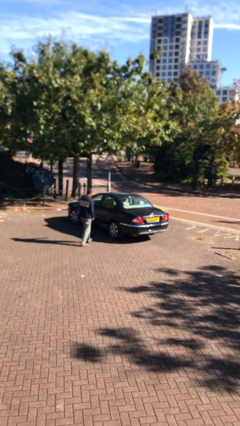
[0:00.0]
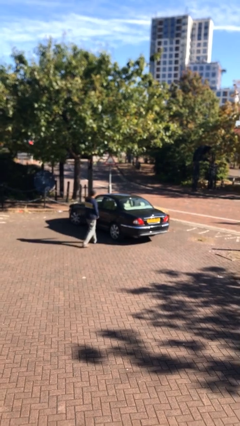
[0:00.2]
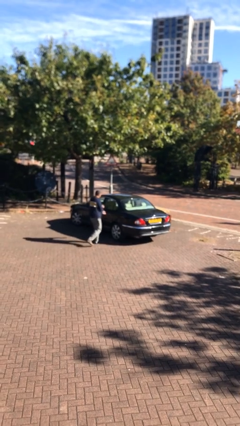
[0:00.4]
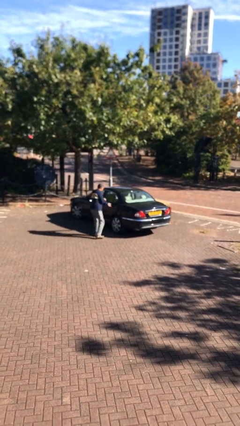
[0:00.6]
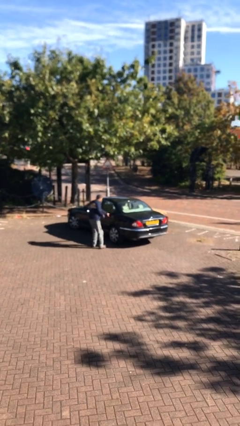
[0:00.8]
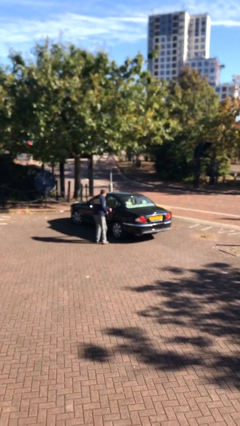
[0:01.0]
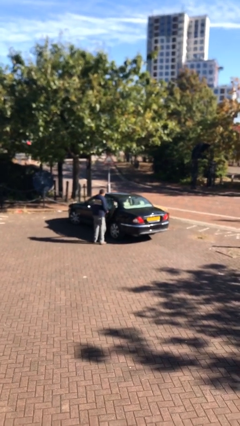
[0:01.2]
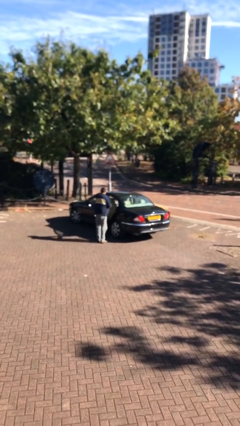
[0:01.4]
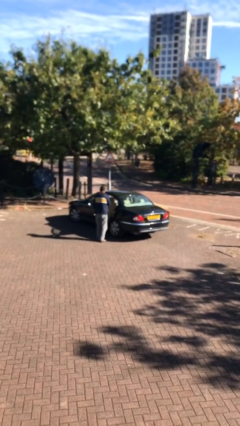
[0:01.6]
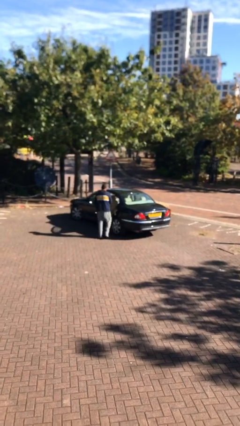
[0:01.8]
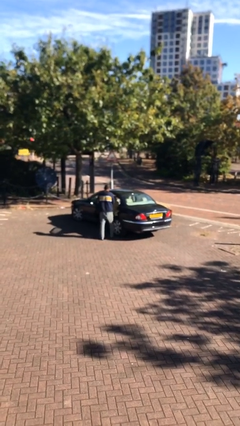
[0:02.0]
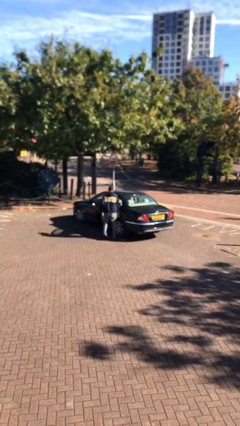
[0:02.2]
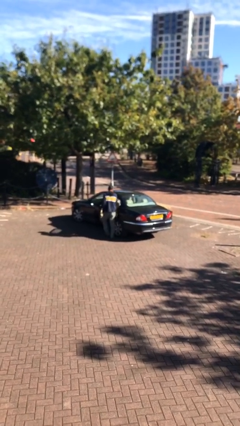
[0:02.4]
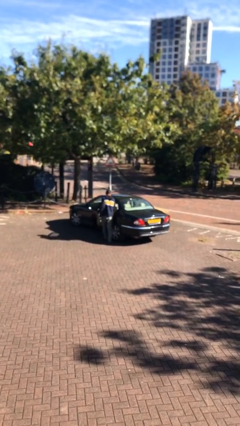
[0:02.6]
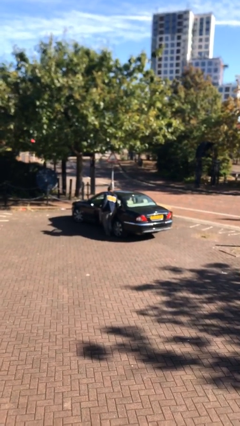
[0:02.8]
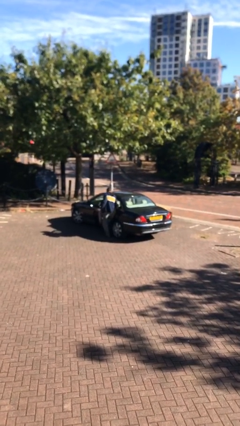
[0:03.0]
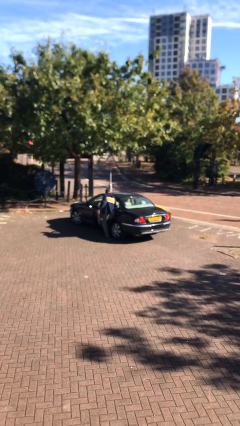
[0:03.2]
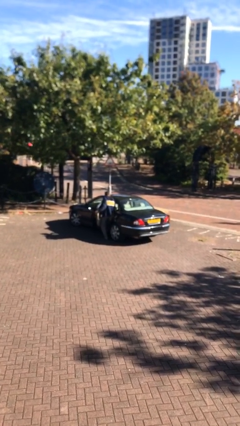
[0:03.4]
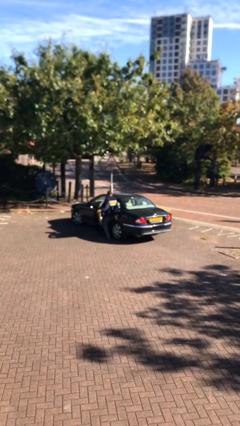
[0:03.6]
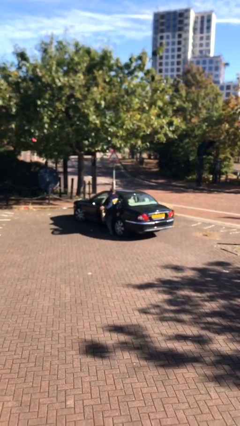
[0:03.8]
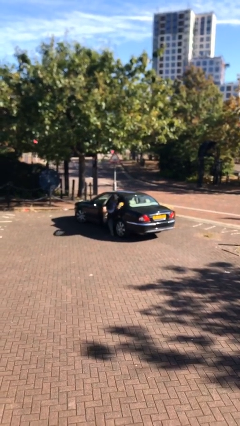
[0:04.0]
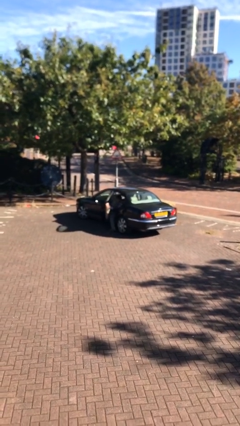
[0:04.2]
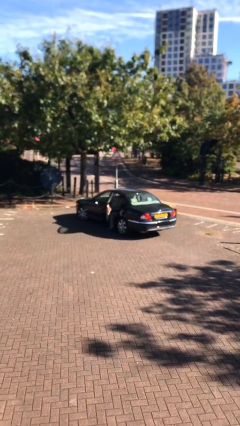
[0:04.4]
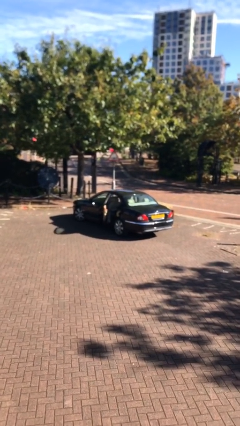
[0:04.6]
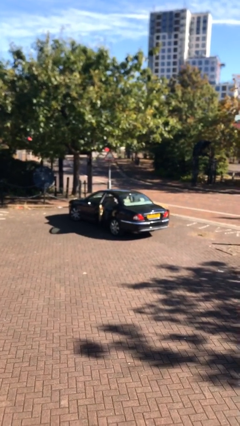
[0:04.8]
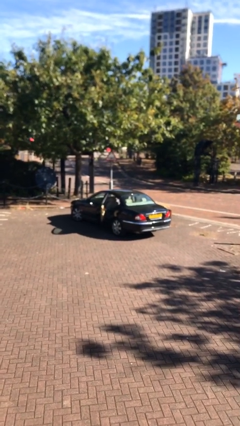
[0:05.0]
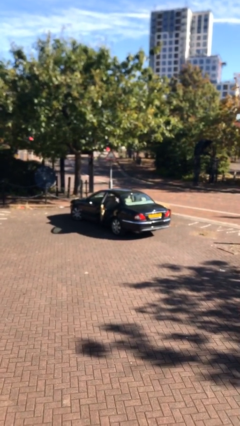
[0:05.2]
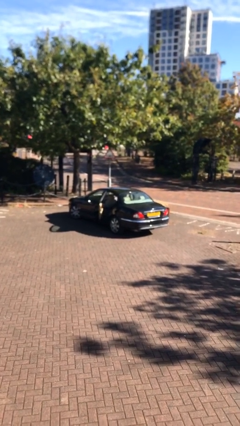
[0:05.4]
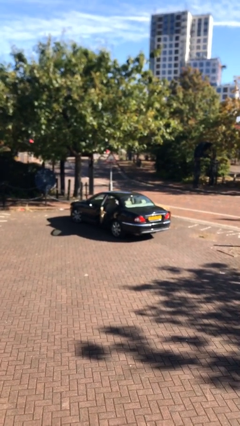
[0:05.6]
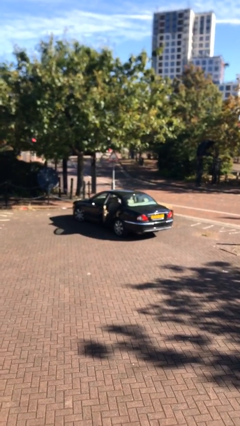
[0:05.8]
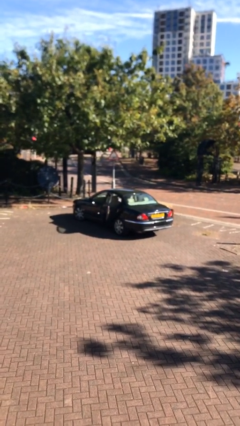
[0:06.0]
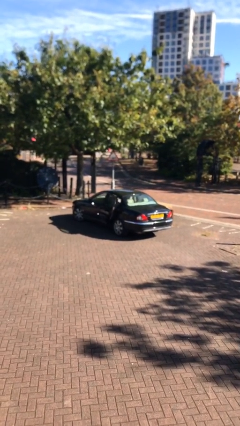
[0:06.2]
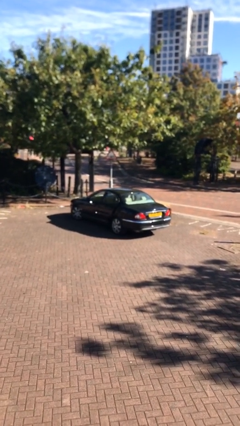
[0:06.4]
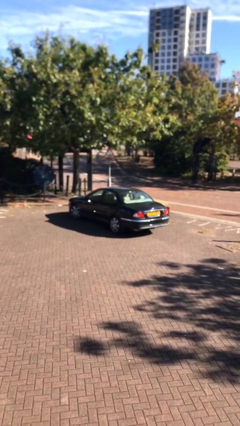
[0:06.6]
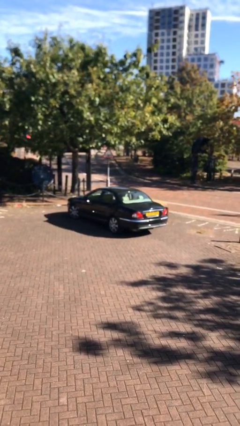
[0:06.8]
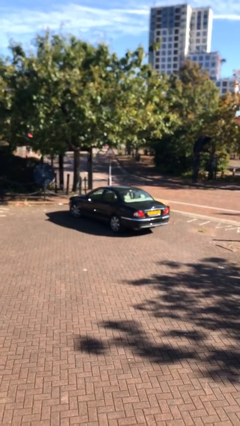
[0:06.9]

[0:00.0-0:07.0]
car picks up person

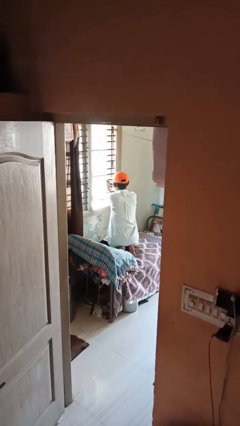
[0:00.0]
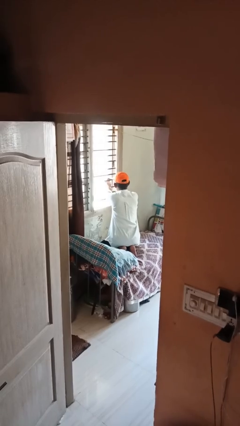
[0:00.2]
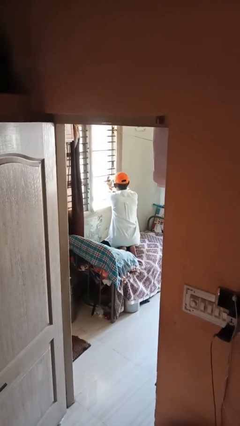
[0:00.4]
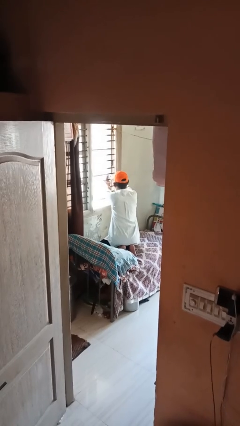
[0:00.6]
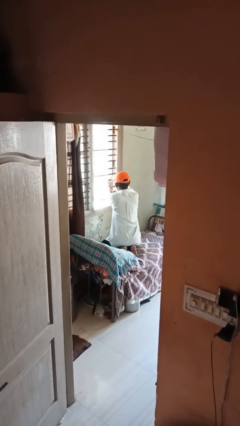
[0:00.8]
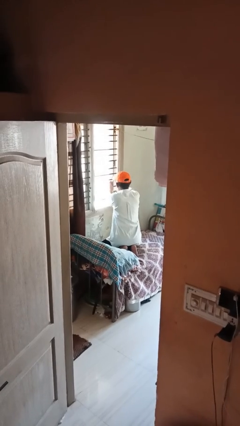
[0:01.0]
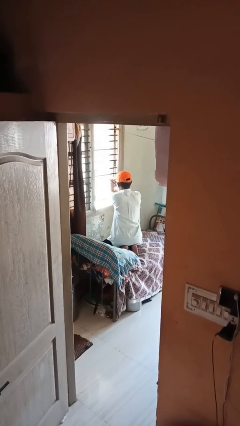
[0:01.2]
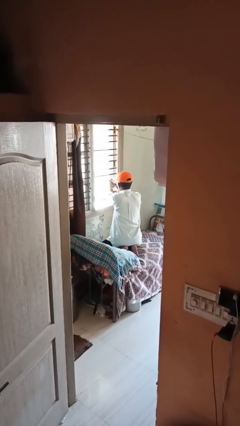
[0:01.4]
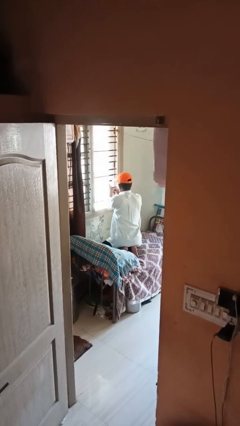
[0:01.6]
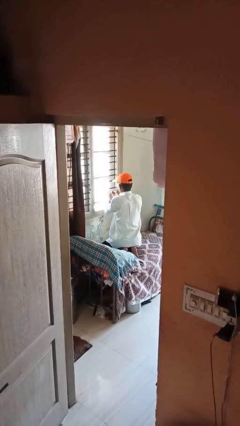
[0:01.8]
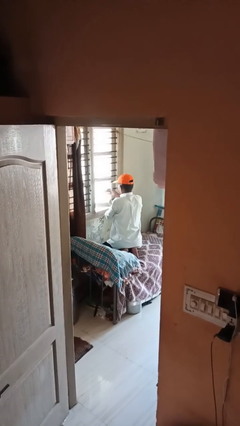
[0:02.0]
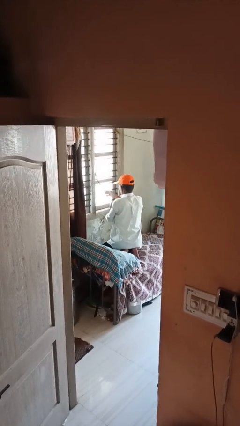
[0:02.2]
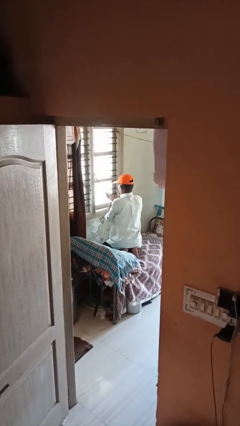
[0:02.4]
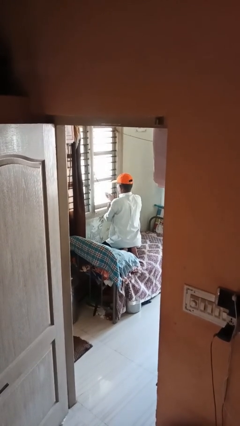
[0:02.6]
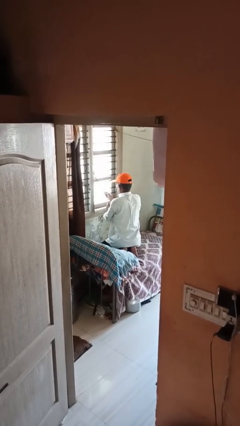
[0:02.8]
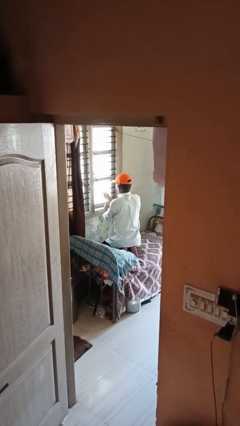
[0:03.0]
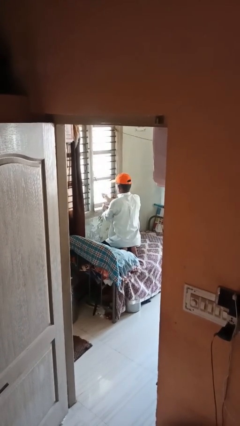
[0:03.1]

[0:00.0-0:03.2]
person closes home window

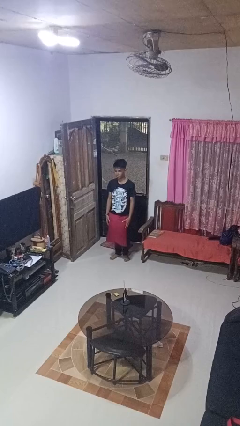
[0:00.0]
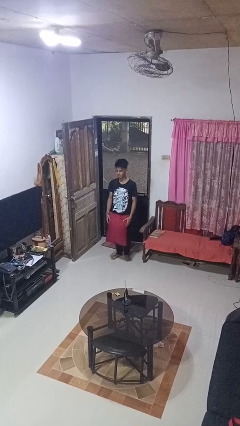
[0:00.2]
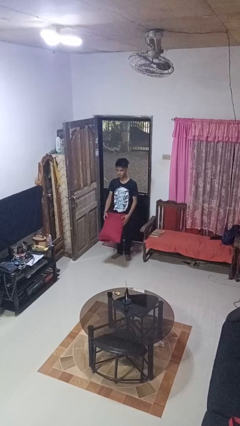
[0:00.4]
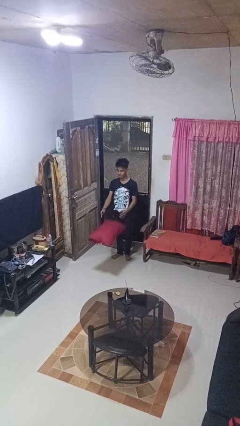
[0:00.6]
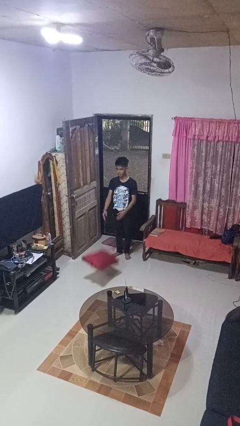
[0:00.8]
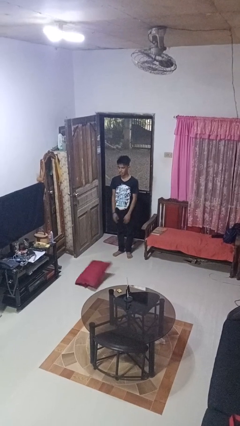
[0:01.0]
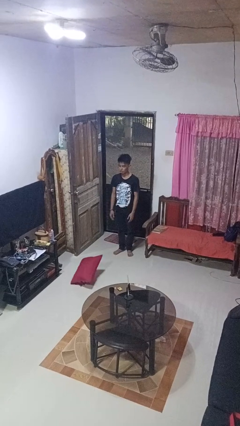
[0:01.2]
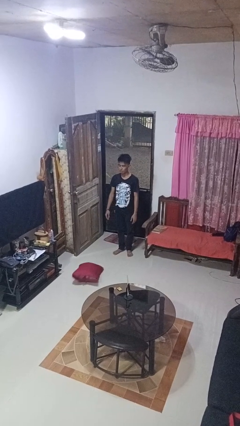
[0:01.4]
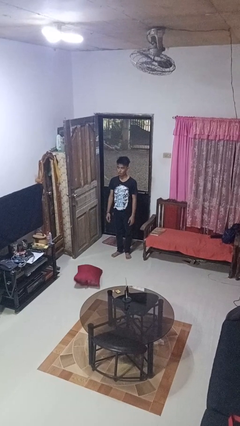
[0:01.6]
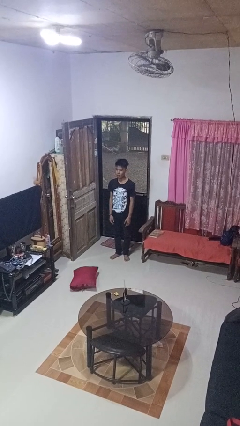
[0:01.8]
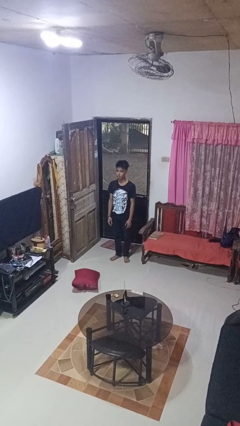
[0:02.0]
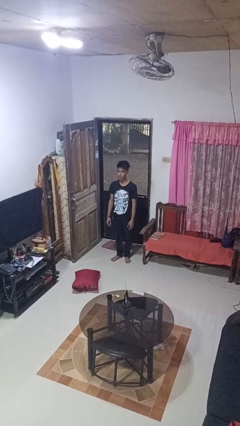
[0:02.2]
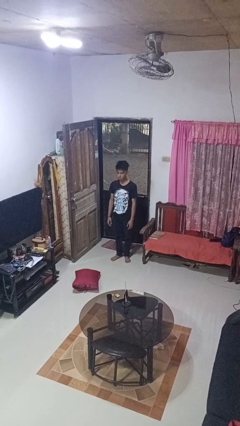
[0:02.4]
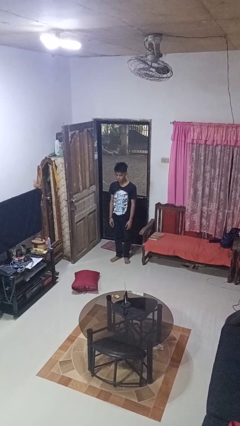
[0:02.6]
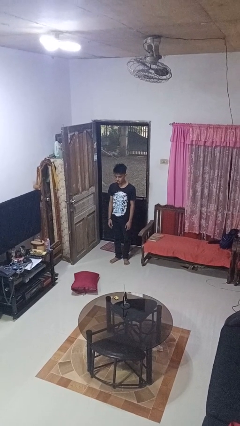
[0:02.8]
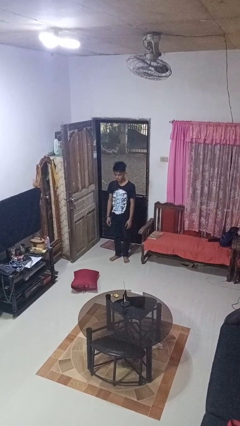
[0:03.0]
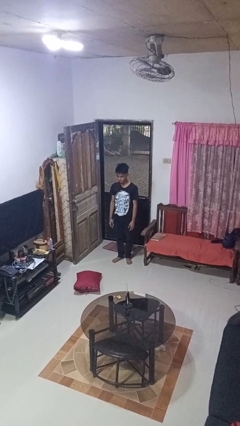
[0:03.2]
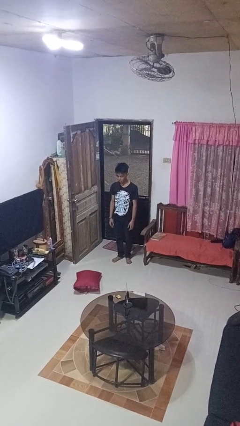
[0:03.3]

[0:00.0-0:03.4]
person throws object to ground

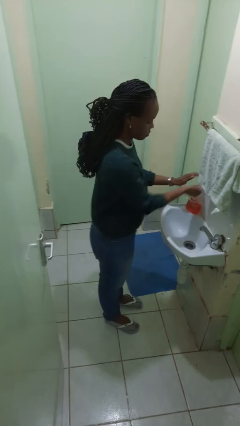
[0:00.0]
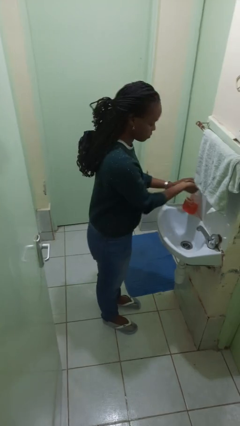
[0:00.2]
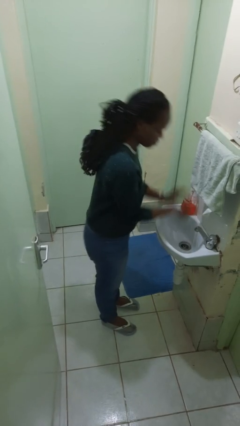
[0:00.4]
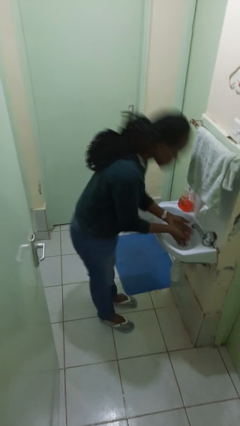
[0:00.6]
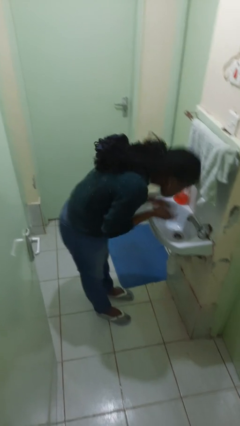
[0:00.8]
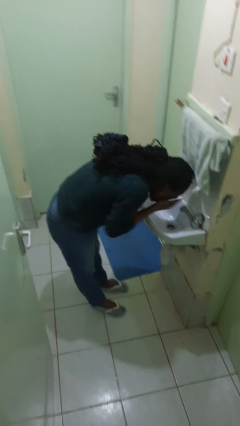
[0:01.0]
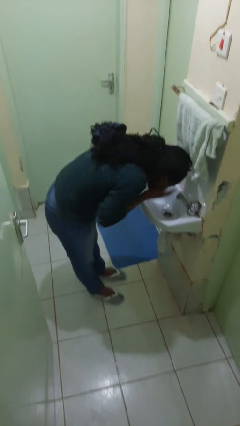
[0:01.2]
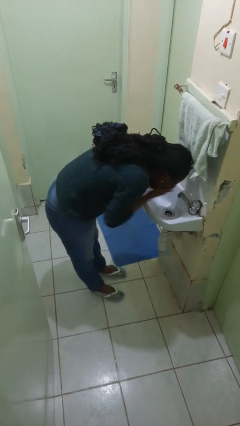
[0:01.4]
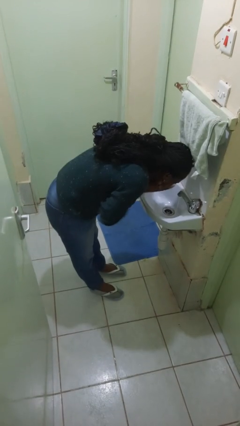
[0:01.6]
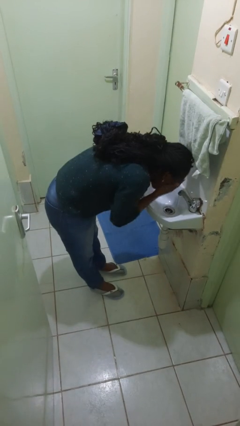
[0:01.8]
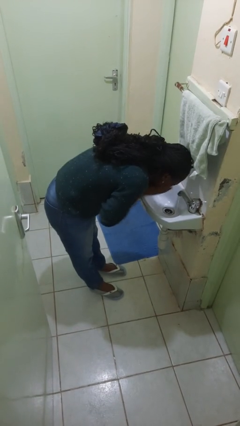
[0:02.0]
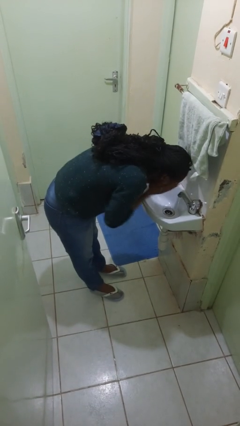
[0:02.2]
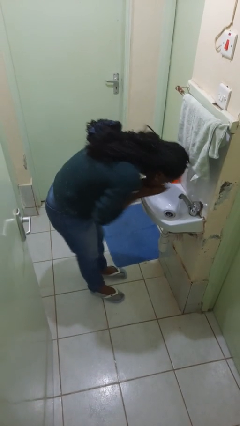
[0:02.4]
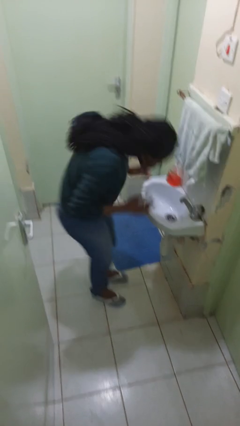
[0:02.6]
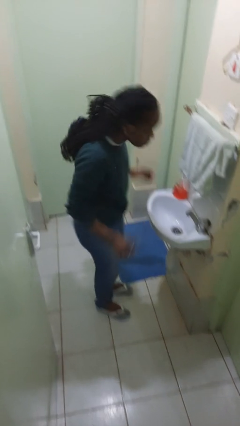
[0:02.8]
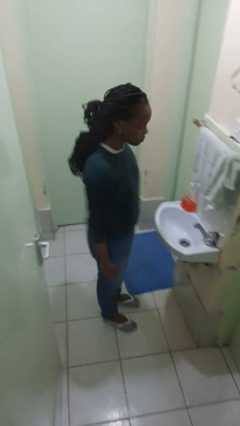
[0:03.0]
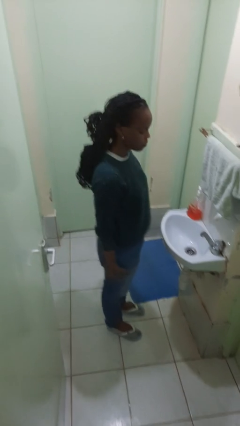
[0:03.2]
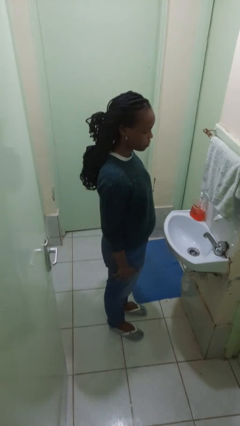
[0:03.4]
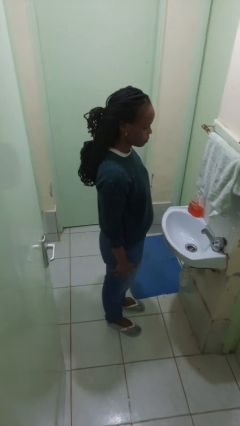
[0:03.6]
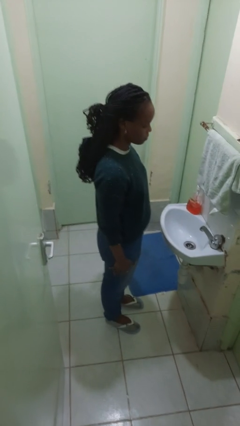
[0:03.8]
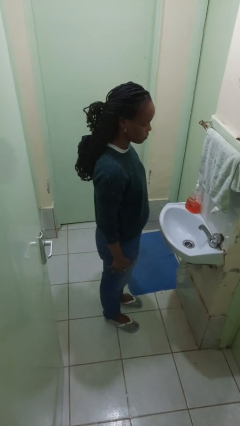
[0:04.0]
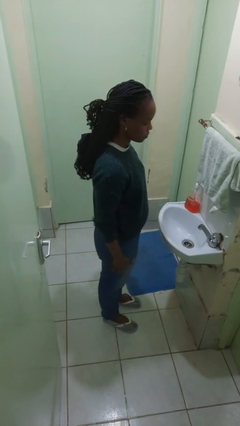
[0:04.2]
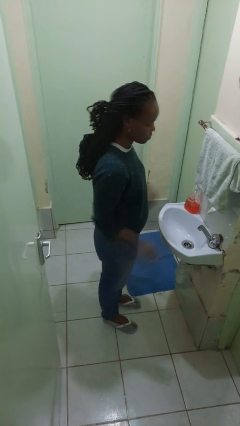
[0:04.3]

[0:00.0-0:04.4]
person washes face
